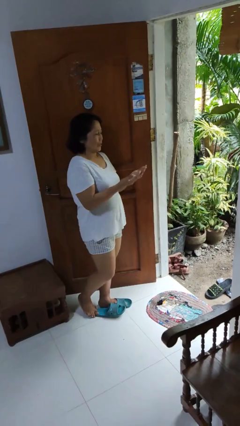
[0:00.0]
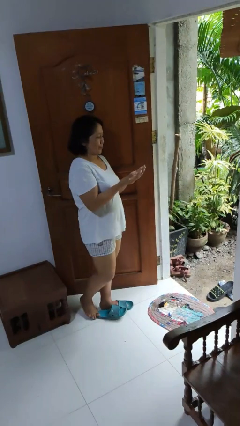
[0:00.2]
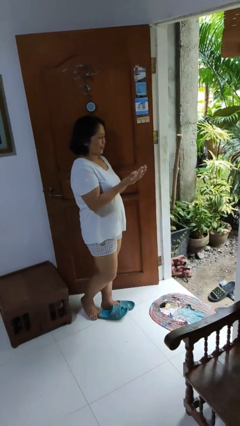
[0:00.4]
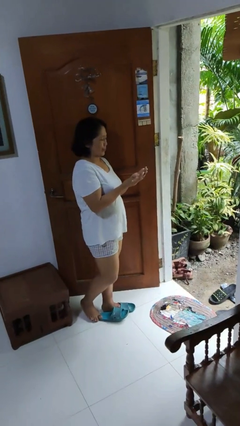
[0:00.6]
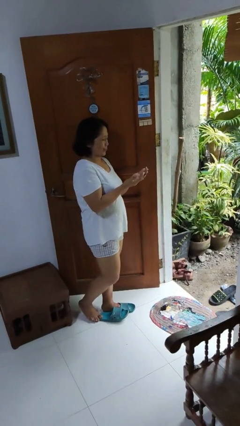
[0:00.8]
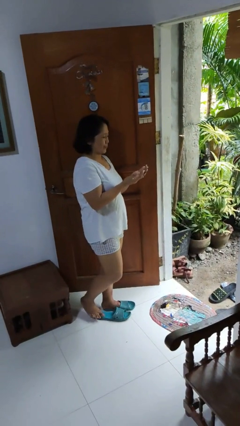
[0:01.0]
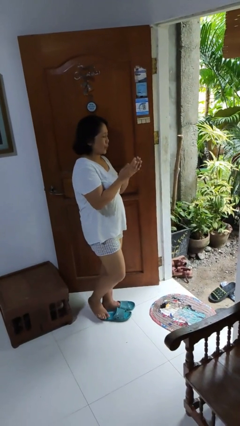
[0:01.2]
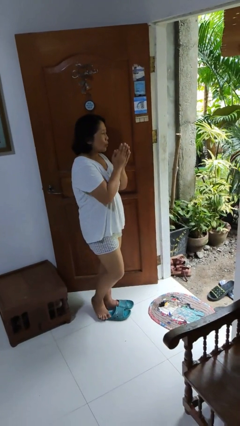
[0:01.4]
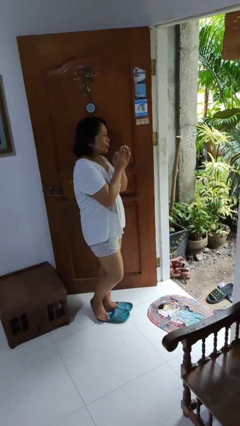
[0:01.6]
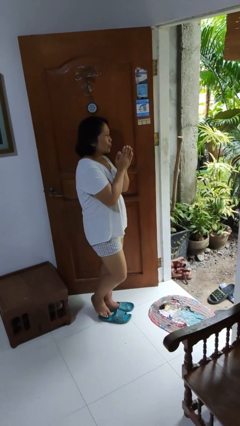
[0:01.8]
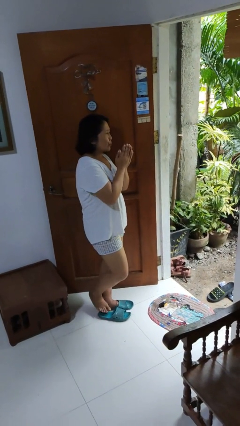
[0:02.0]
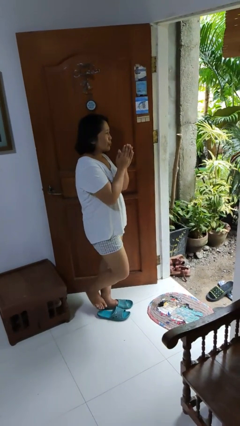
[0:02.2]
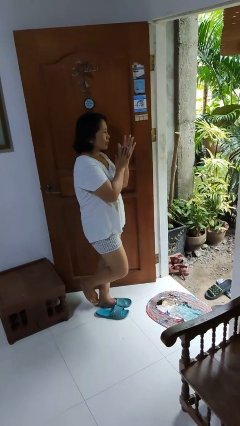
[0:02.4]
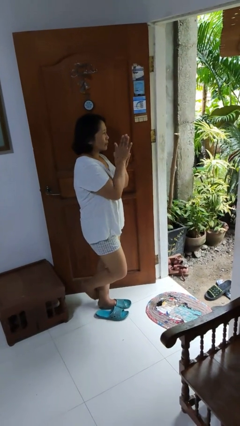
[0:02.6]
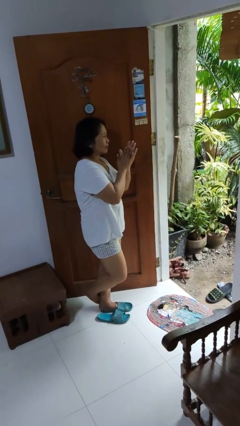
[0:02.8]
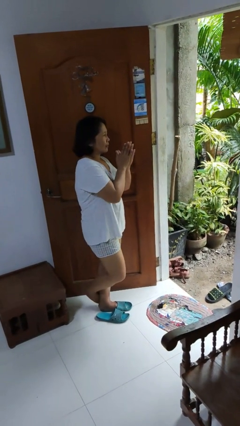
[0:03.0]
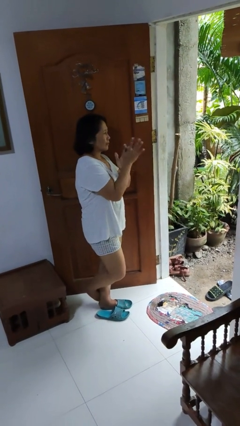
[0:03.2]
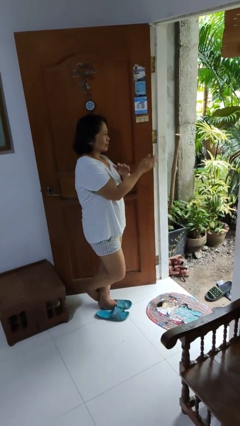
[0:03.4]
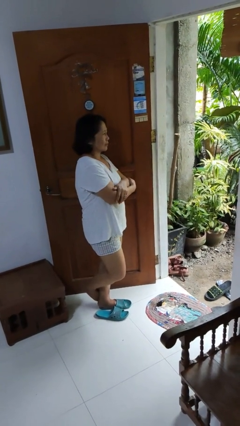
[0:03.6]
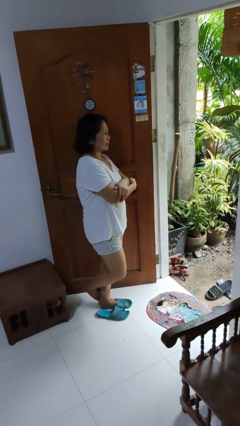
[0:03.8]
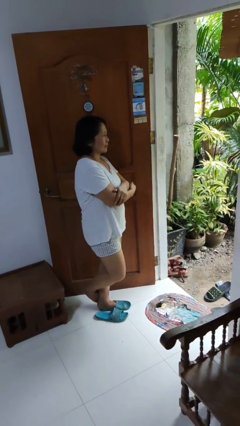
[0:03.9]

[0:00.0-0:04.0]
person blows into hands

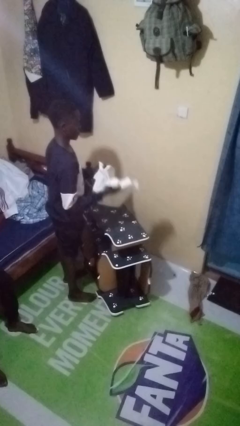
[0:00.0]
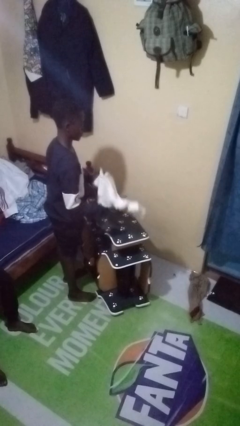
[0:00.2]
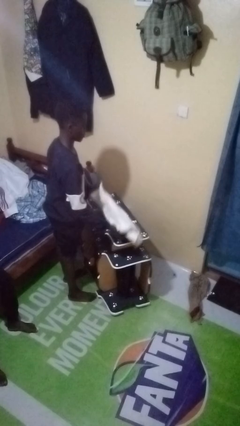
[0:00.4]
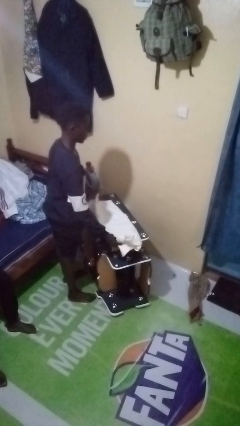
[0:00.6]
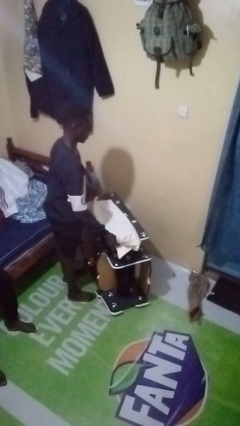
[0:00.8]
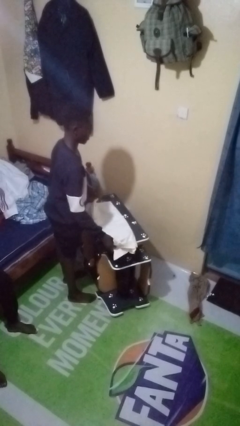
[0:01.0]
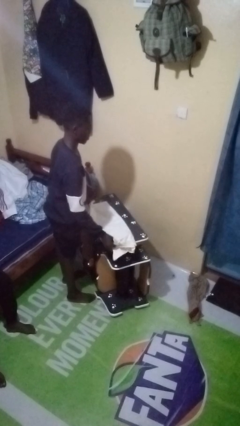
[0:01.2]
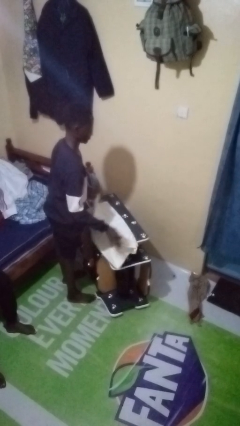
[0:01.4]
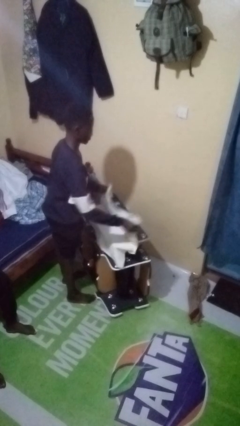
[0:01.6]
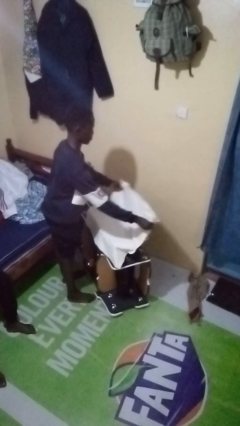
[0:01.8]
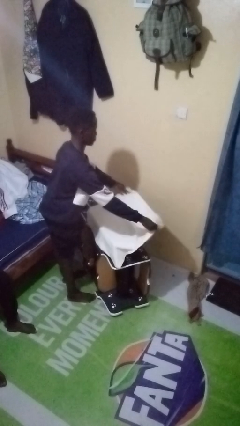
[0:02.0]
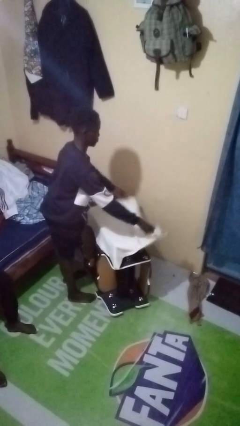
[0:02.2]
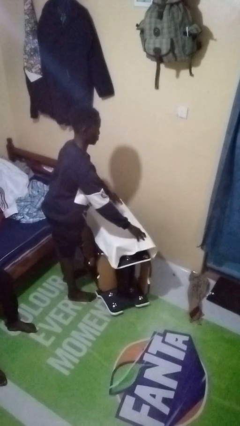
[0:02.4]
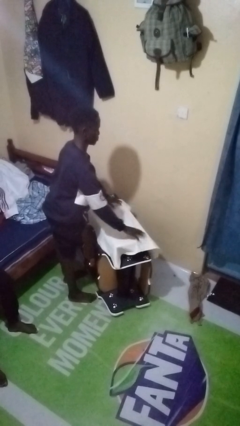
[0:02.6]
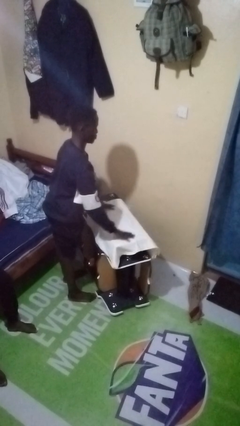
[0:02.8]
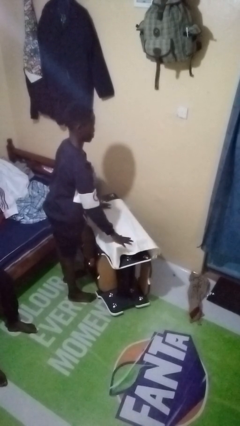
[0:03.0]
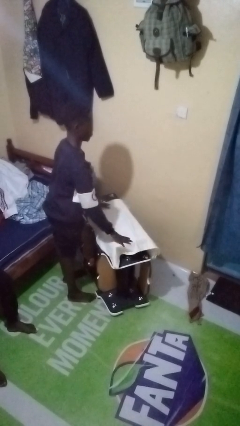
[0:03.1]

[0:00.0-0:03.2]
person spreads tablecloth

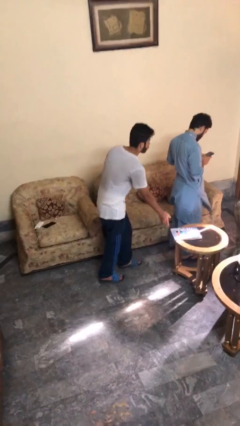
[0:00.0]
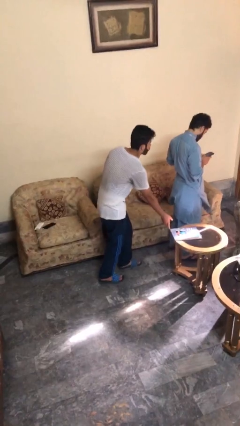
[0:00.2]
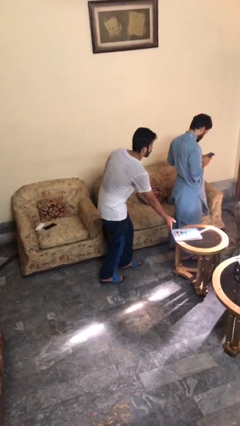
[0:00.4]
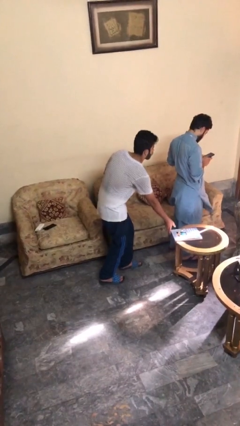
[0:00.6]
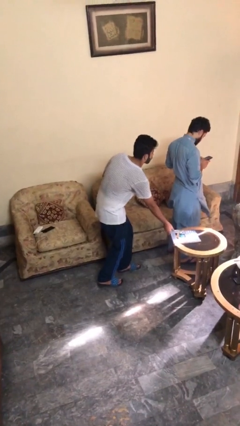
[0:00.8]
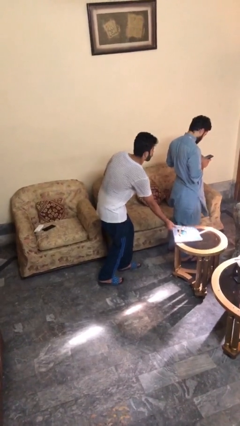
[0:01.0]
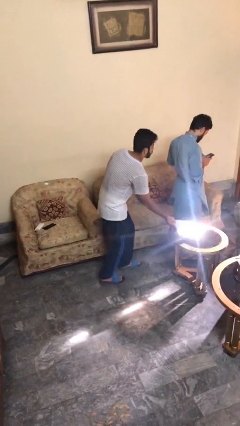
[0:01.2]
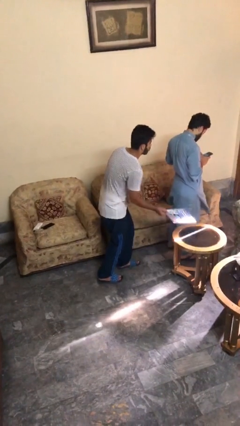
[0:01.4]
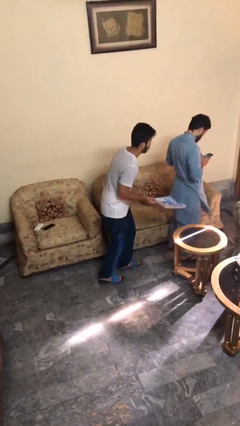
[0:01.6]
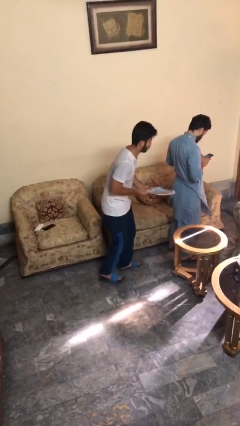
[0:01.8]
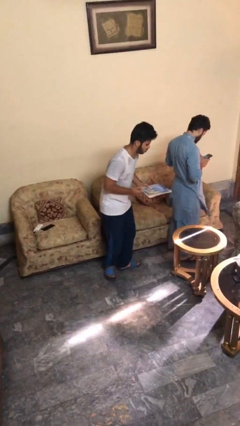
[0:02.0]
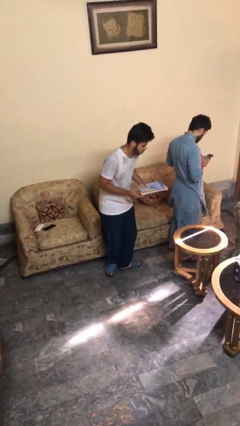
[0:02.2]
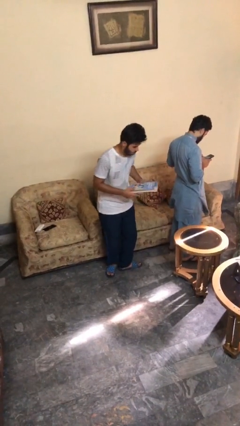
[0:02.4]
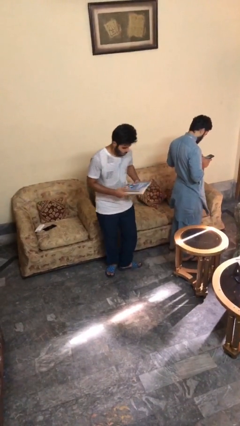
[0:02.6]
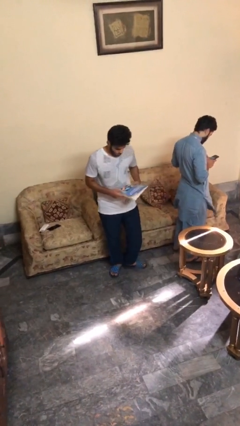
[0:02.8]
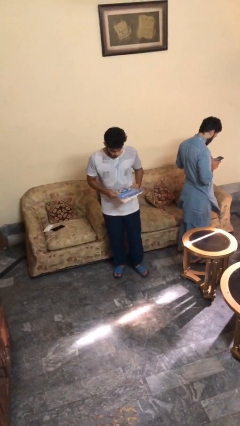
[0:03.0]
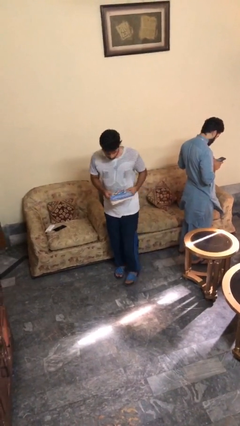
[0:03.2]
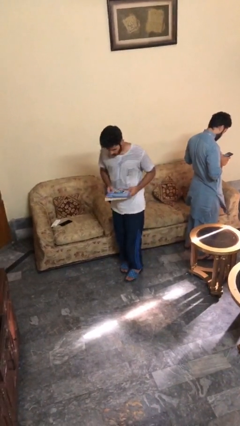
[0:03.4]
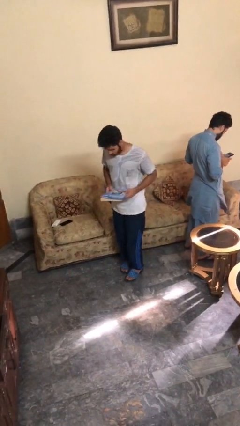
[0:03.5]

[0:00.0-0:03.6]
person steals object from person

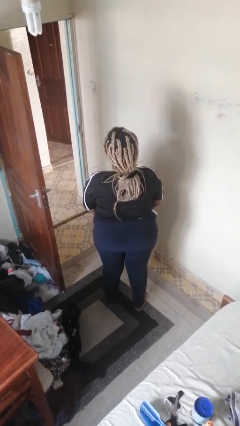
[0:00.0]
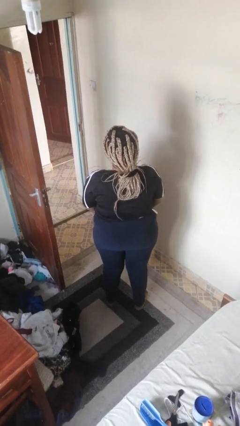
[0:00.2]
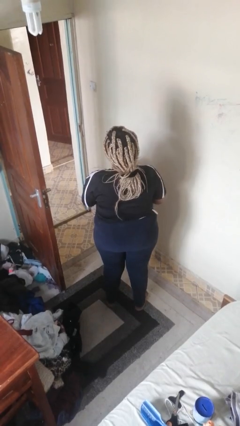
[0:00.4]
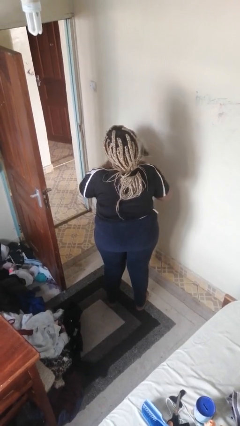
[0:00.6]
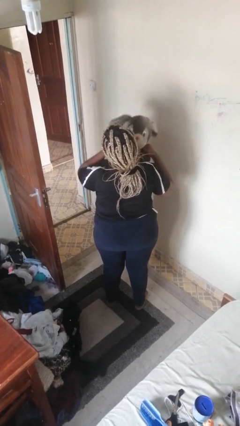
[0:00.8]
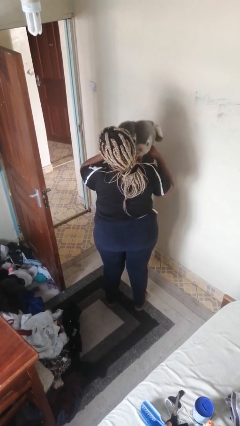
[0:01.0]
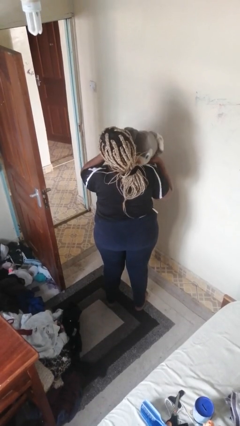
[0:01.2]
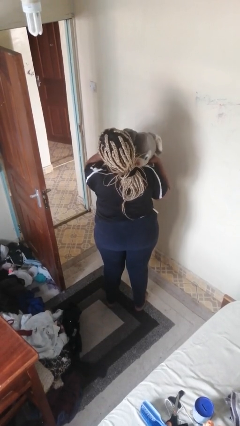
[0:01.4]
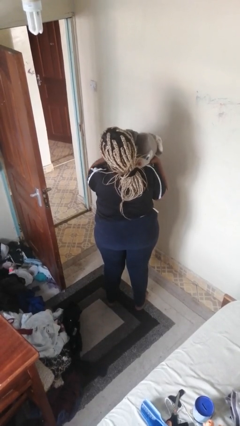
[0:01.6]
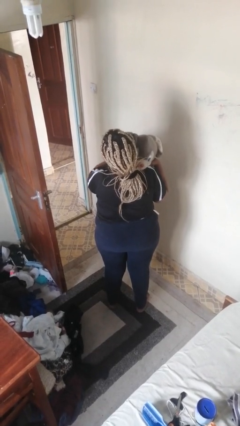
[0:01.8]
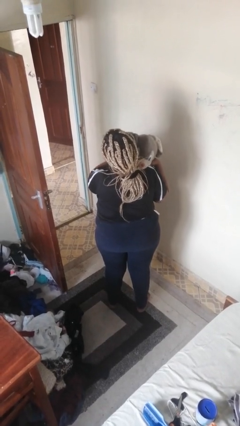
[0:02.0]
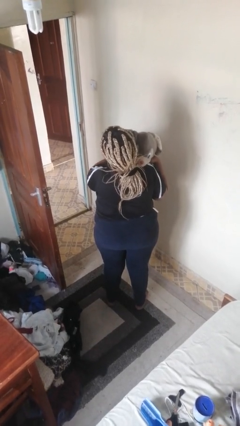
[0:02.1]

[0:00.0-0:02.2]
person hugs stuffed animal

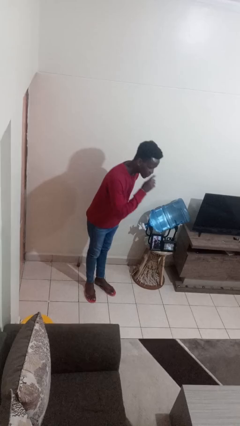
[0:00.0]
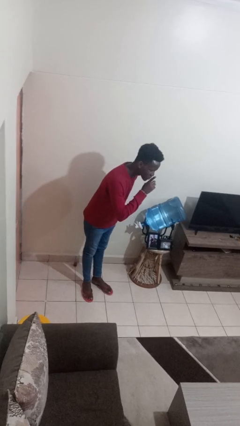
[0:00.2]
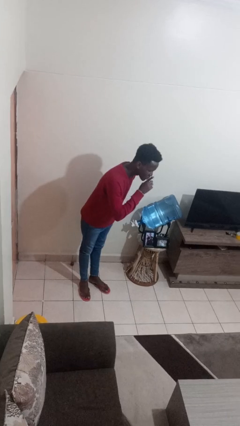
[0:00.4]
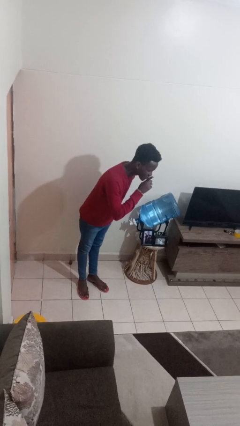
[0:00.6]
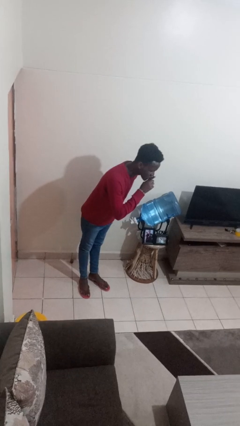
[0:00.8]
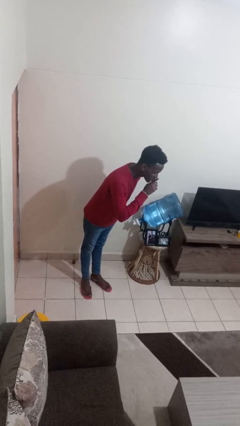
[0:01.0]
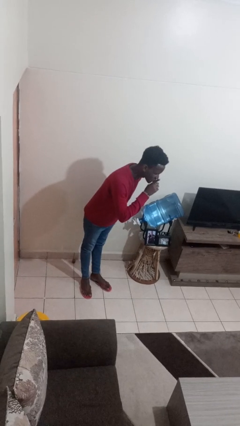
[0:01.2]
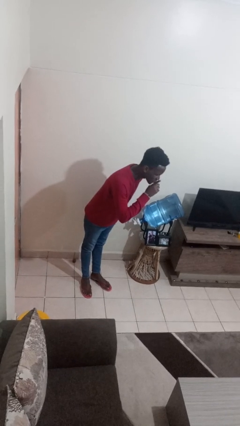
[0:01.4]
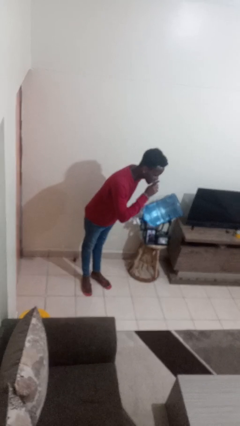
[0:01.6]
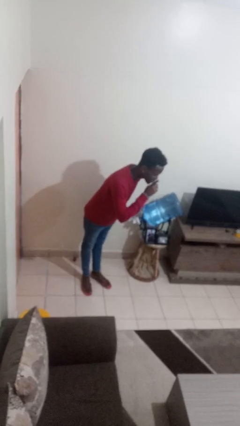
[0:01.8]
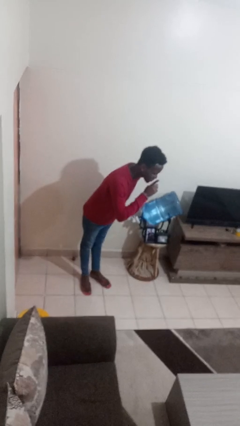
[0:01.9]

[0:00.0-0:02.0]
person gestures be quiet

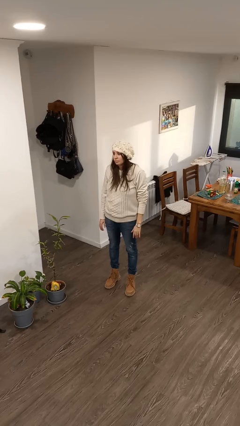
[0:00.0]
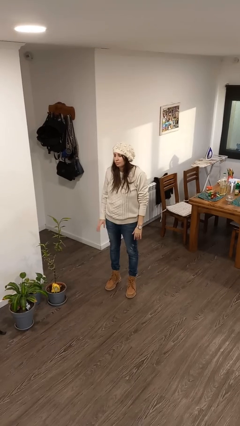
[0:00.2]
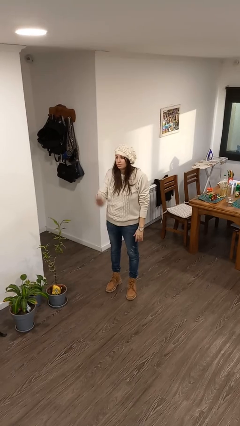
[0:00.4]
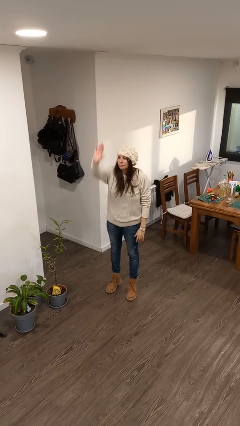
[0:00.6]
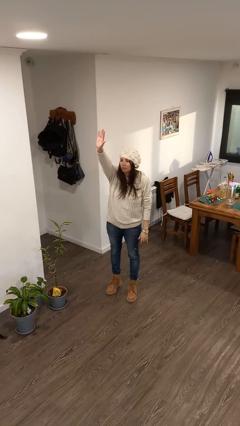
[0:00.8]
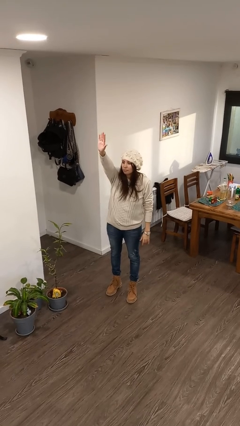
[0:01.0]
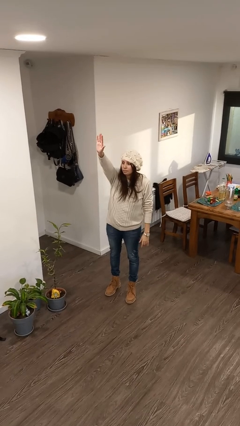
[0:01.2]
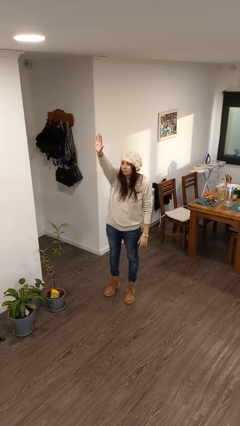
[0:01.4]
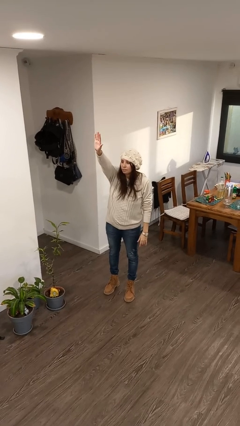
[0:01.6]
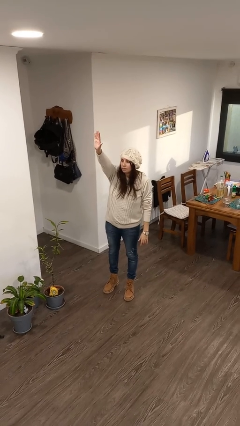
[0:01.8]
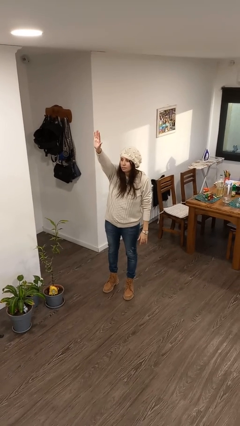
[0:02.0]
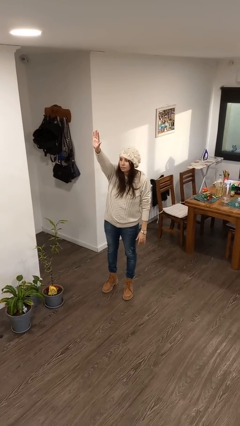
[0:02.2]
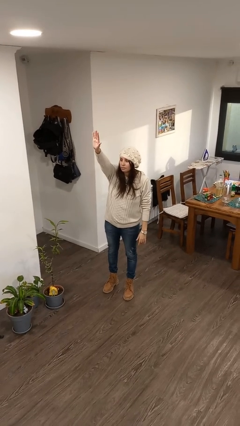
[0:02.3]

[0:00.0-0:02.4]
person gestures raise hand
